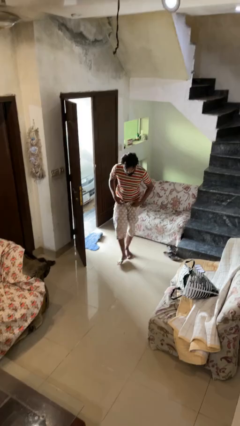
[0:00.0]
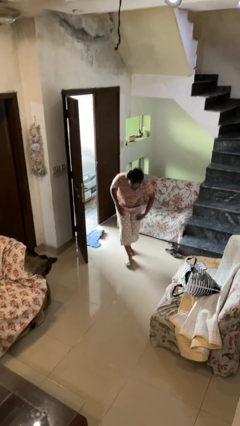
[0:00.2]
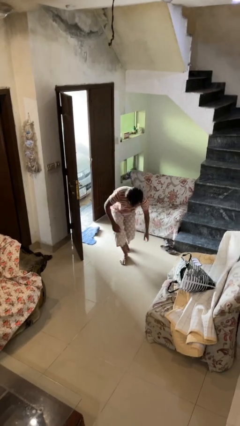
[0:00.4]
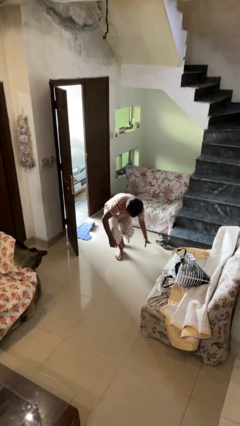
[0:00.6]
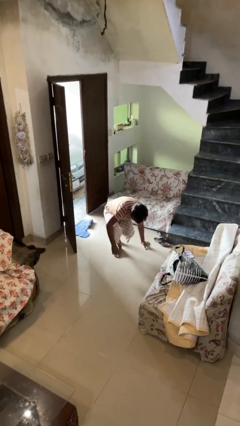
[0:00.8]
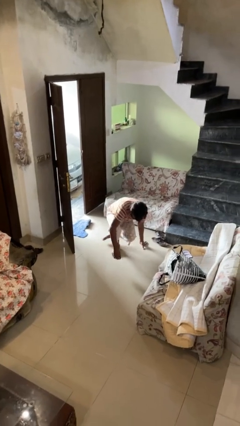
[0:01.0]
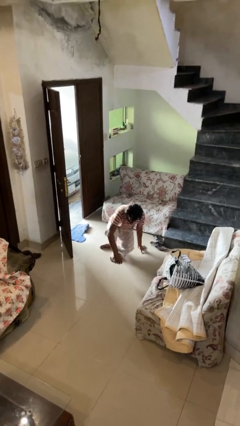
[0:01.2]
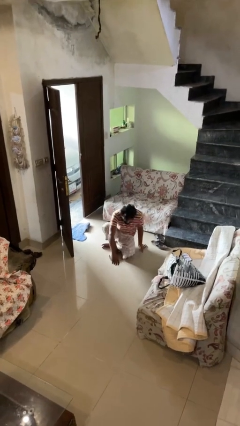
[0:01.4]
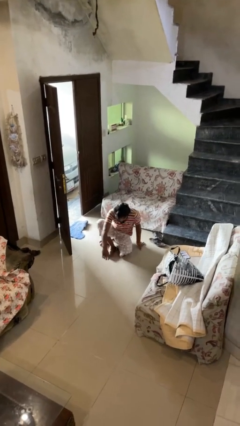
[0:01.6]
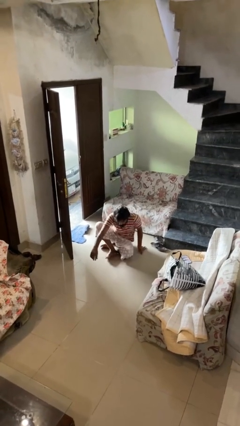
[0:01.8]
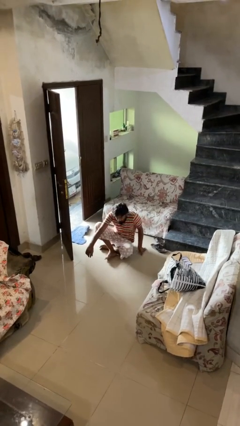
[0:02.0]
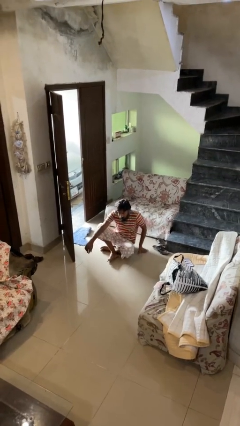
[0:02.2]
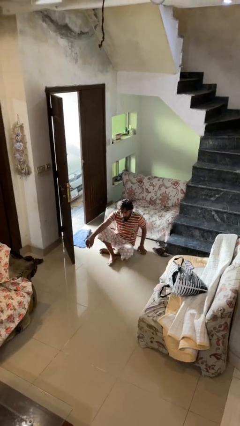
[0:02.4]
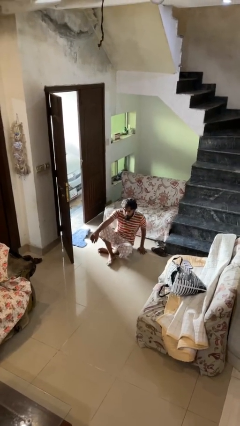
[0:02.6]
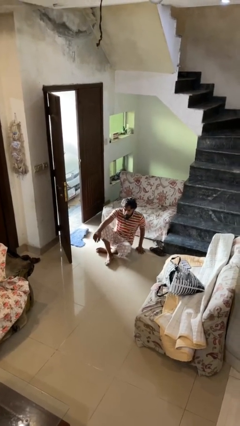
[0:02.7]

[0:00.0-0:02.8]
person sits crisscross

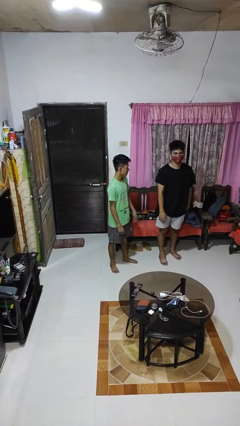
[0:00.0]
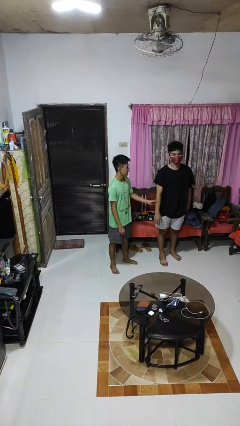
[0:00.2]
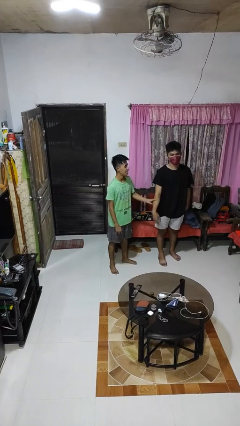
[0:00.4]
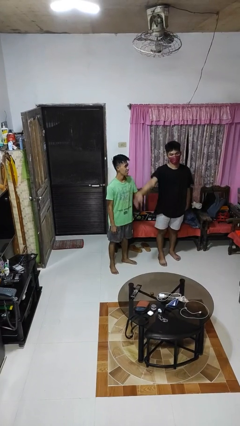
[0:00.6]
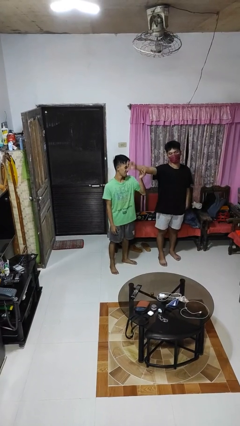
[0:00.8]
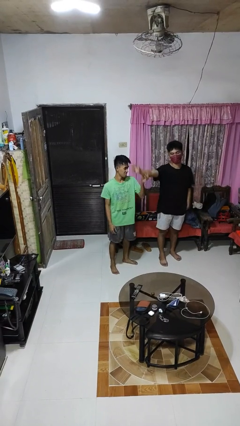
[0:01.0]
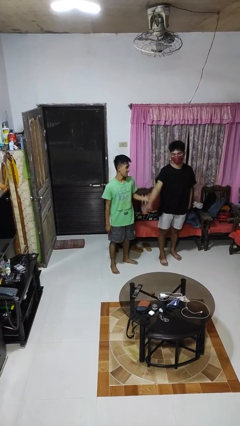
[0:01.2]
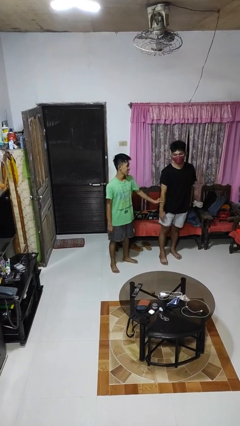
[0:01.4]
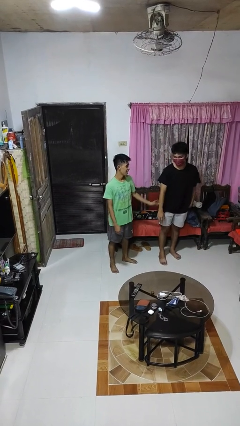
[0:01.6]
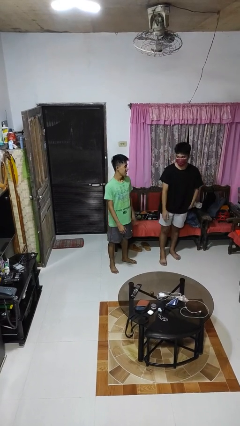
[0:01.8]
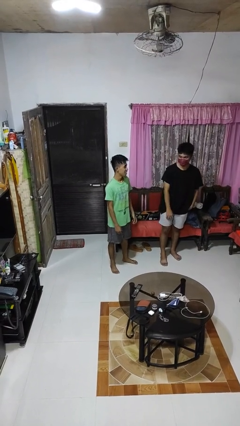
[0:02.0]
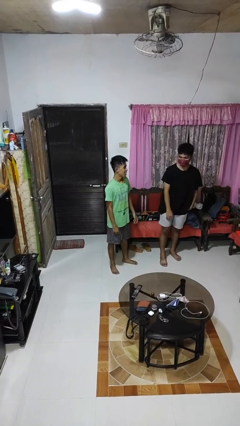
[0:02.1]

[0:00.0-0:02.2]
person grabs person by forearm

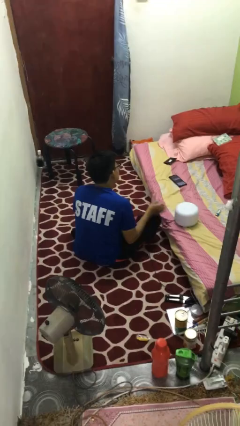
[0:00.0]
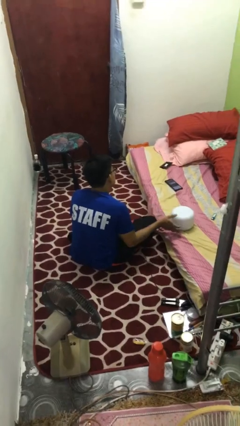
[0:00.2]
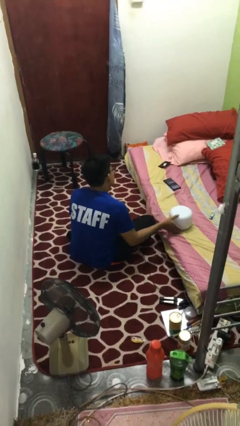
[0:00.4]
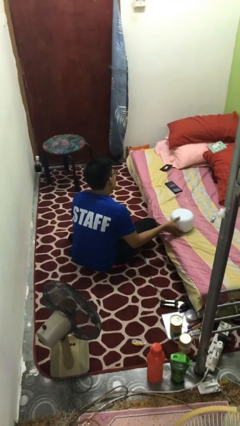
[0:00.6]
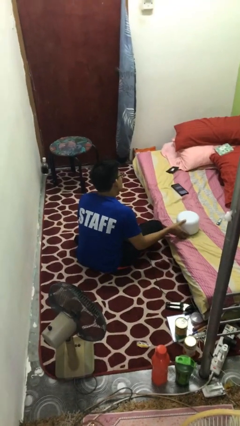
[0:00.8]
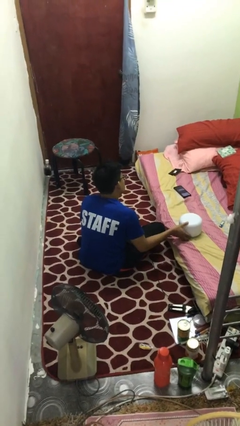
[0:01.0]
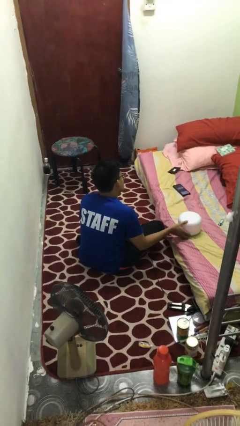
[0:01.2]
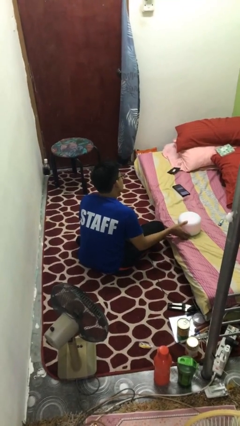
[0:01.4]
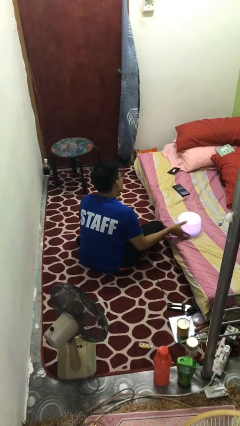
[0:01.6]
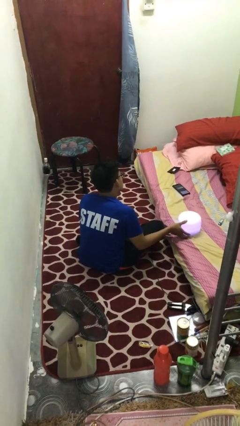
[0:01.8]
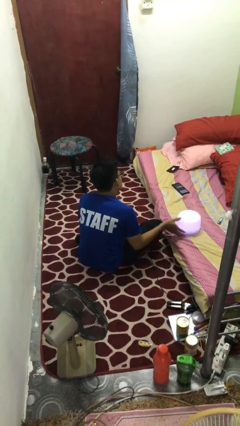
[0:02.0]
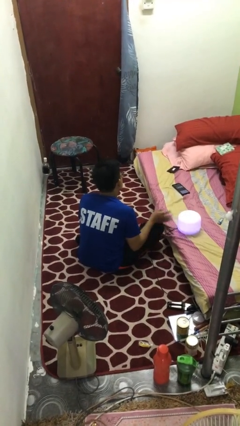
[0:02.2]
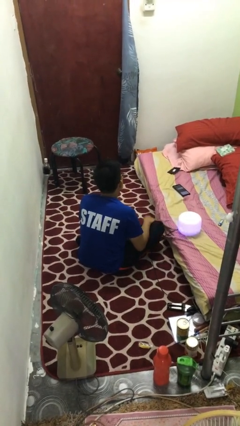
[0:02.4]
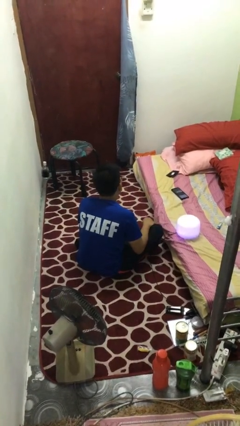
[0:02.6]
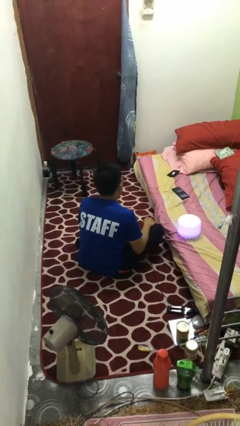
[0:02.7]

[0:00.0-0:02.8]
person turns on lamp

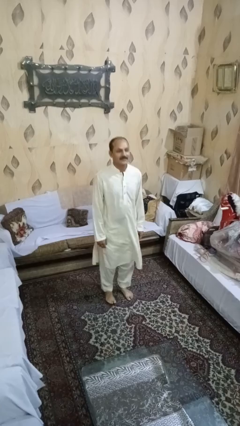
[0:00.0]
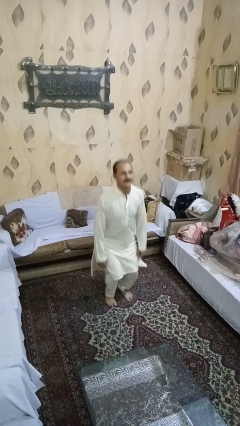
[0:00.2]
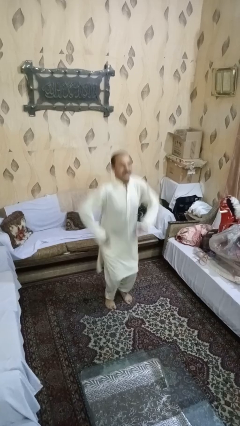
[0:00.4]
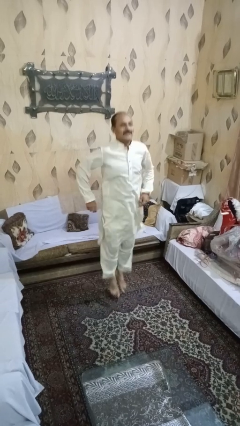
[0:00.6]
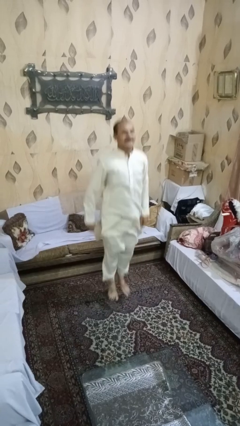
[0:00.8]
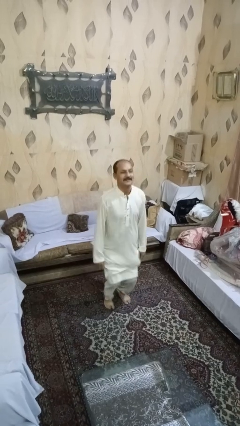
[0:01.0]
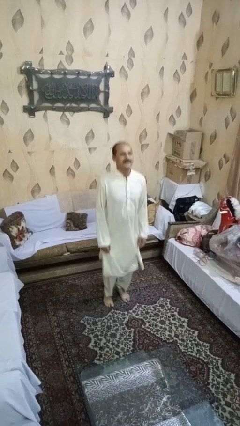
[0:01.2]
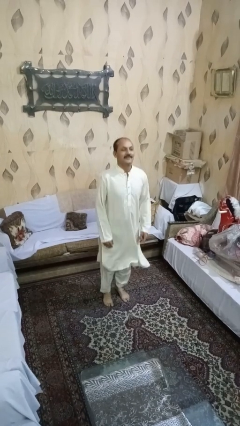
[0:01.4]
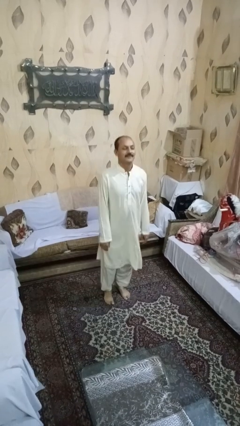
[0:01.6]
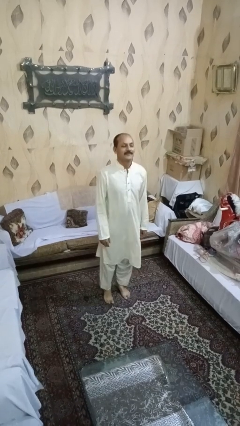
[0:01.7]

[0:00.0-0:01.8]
person jumps

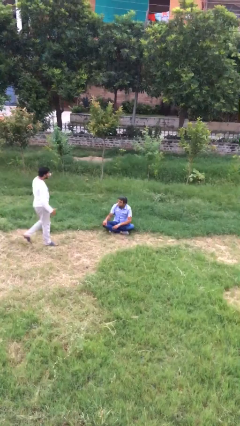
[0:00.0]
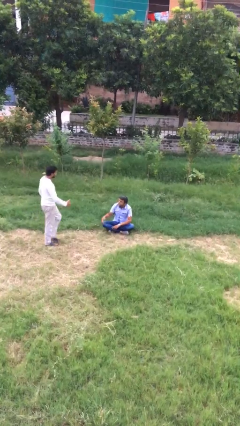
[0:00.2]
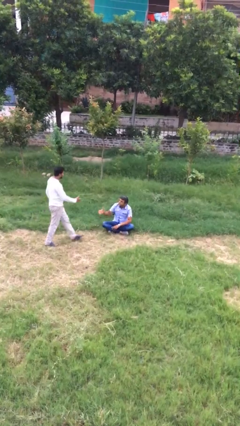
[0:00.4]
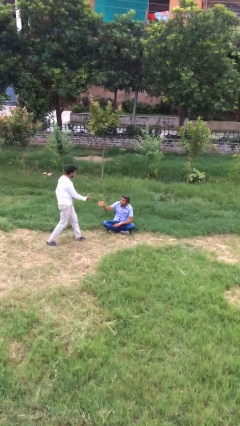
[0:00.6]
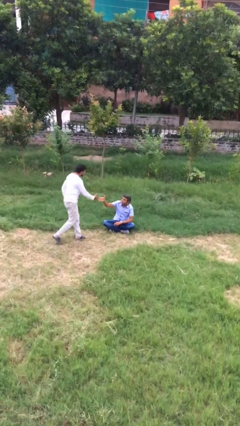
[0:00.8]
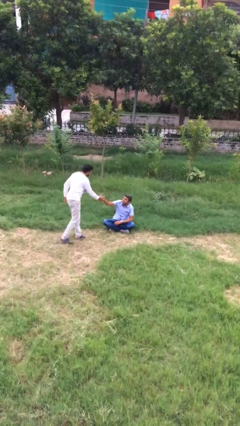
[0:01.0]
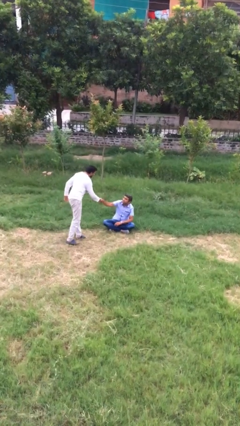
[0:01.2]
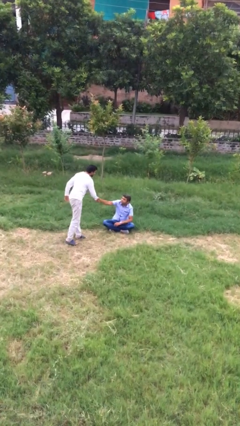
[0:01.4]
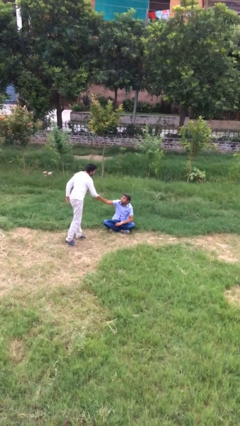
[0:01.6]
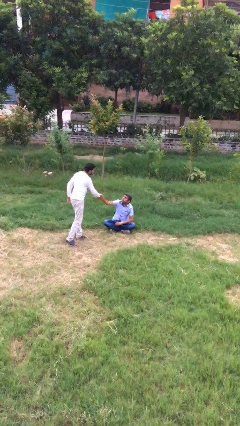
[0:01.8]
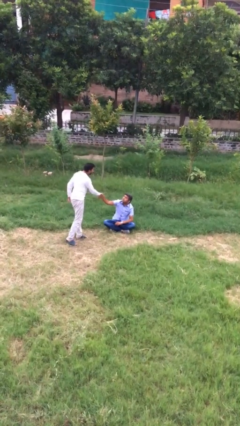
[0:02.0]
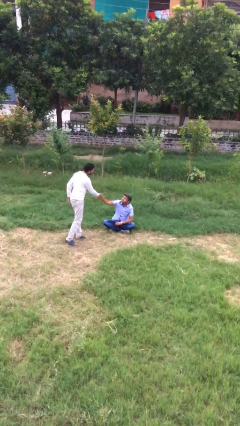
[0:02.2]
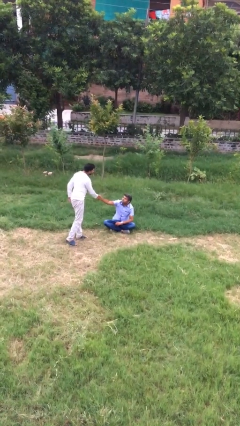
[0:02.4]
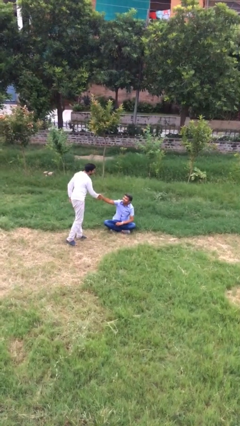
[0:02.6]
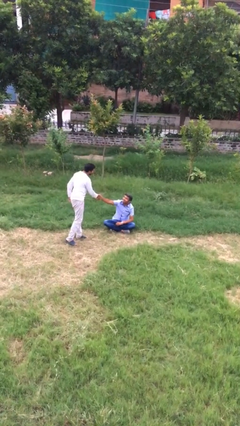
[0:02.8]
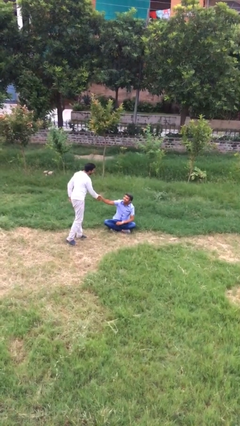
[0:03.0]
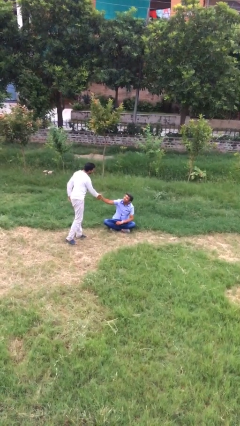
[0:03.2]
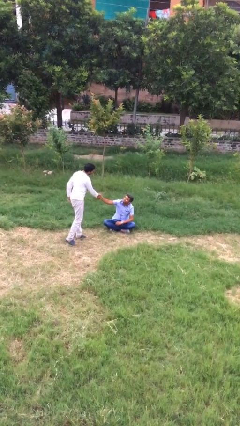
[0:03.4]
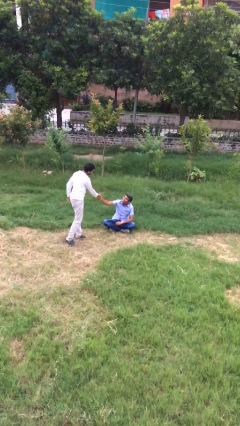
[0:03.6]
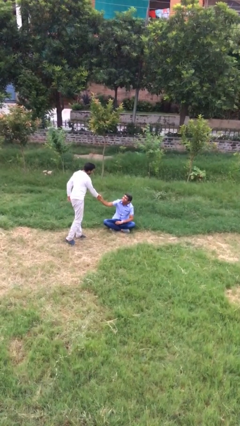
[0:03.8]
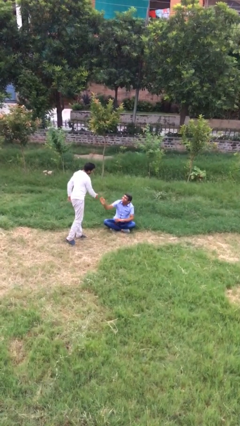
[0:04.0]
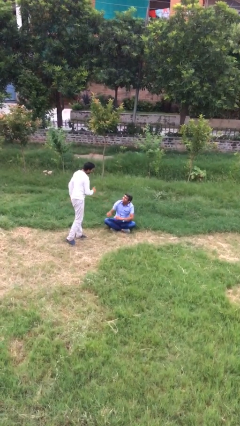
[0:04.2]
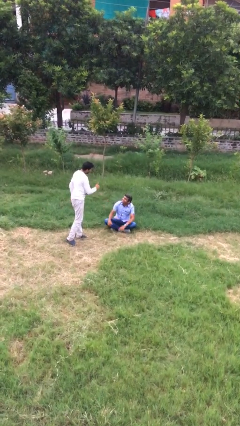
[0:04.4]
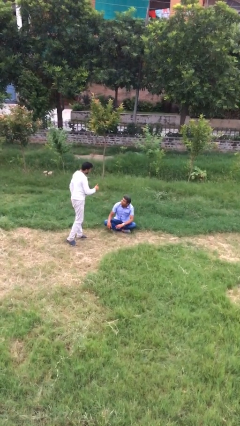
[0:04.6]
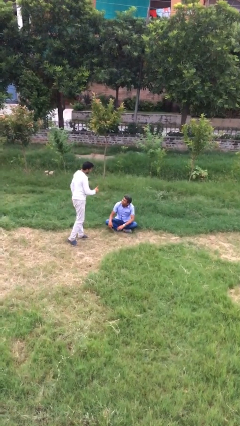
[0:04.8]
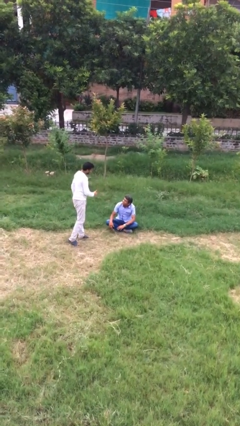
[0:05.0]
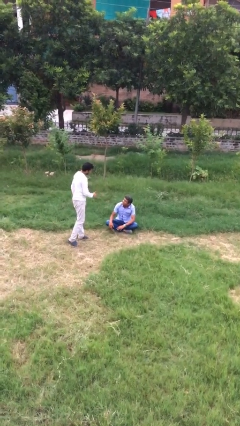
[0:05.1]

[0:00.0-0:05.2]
person shakes hand

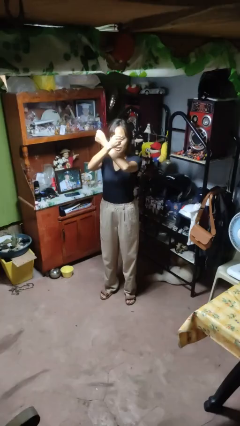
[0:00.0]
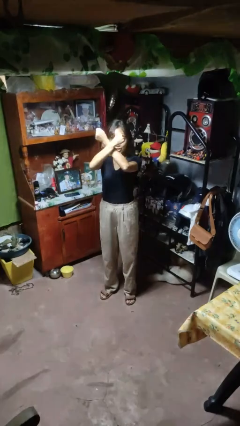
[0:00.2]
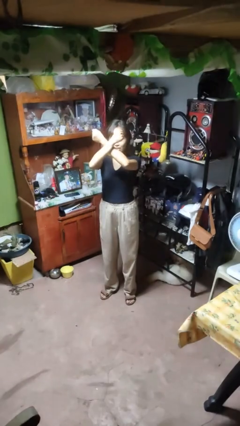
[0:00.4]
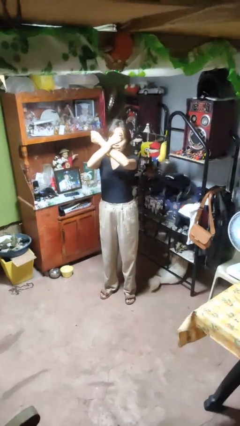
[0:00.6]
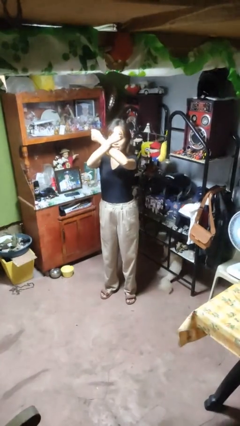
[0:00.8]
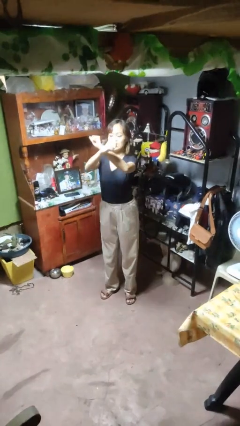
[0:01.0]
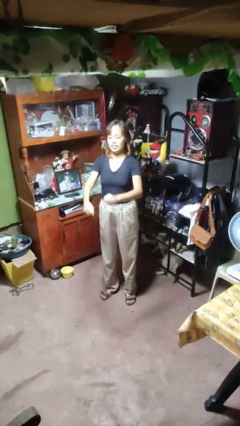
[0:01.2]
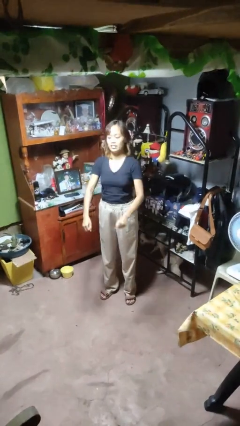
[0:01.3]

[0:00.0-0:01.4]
person gestures arms x

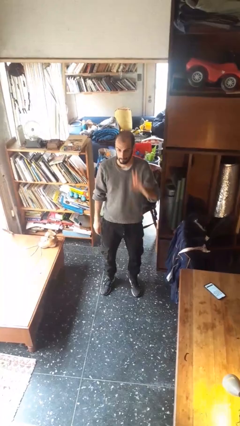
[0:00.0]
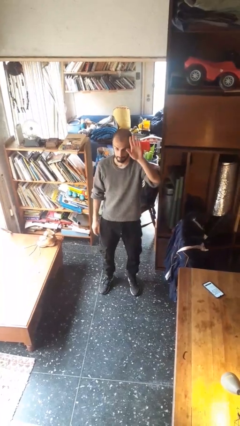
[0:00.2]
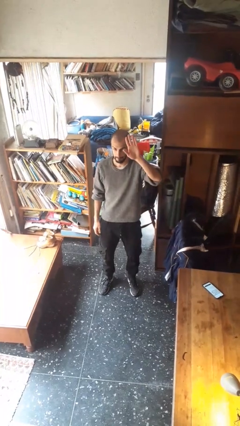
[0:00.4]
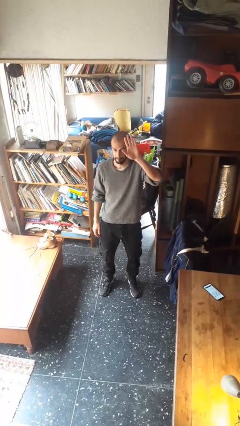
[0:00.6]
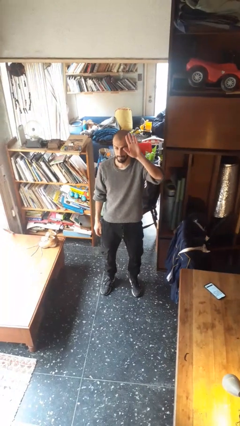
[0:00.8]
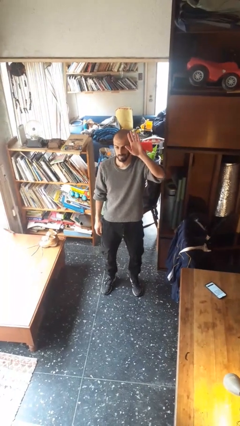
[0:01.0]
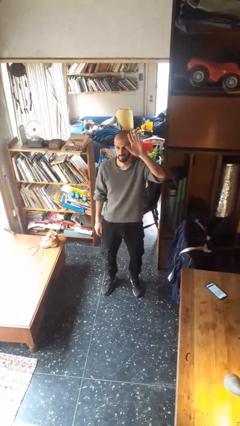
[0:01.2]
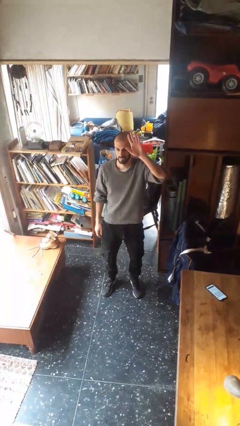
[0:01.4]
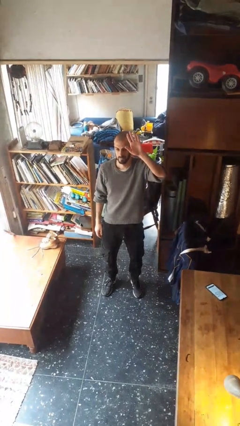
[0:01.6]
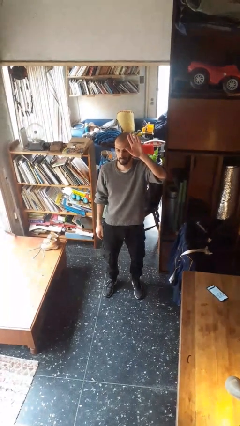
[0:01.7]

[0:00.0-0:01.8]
person gestures raise hand
